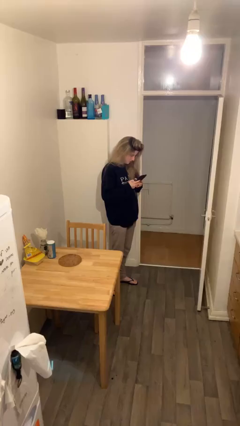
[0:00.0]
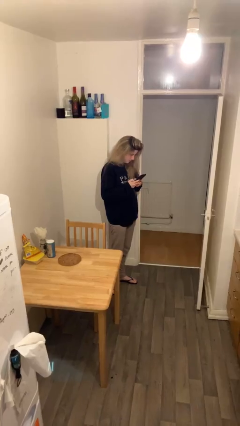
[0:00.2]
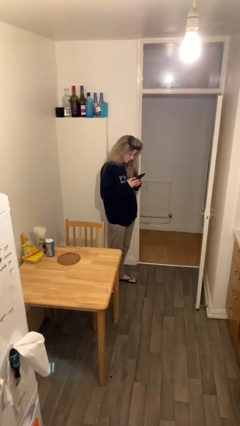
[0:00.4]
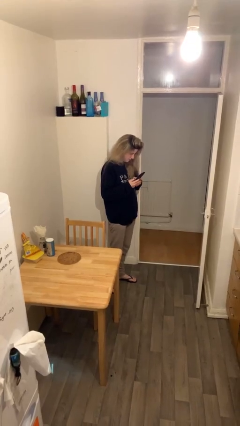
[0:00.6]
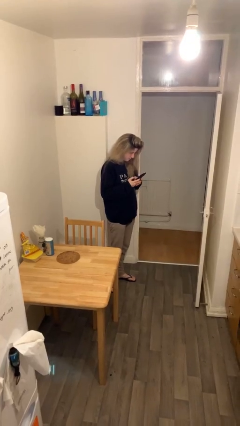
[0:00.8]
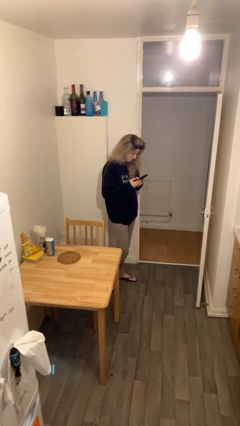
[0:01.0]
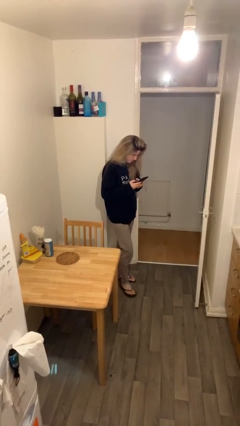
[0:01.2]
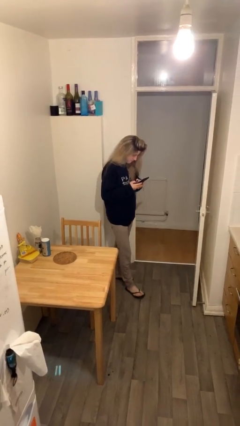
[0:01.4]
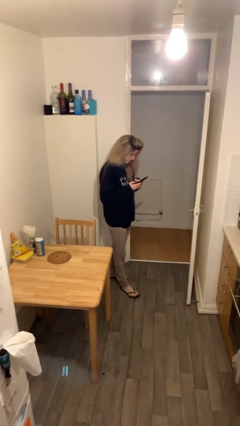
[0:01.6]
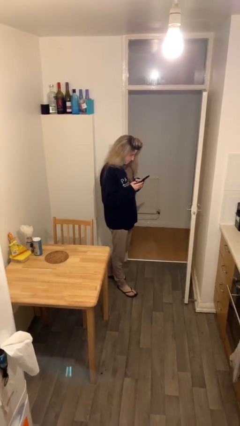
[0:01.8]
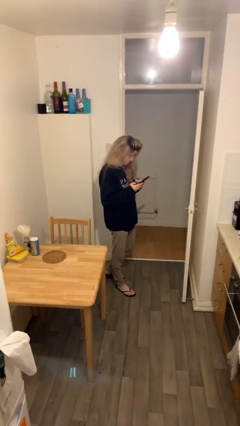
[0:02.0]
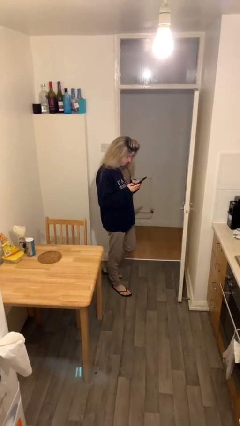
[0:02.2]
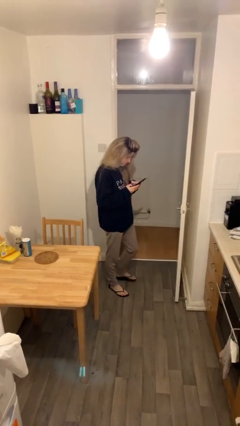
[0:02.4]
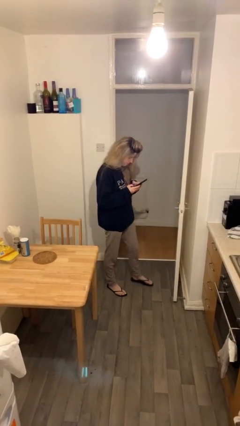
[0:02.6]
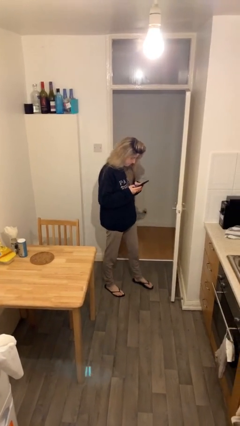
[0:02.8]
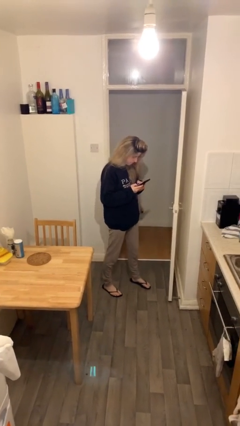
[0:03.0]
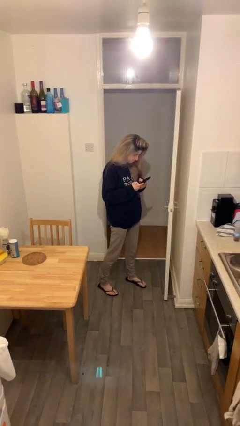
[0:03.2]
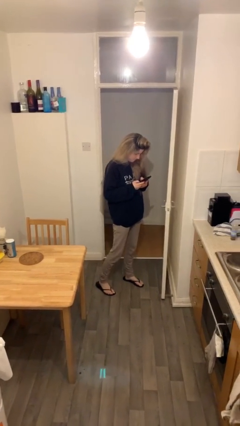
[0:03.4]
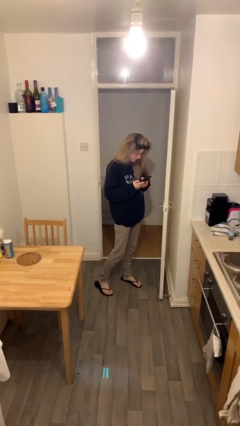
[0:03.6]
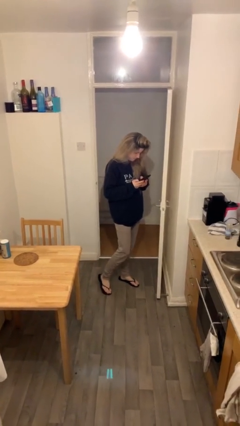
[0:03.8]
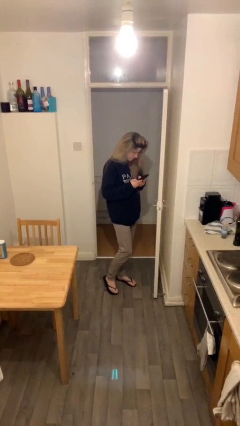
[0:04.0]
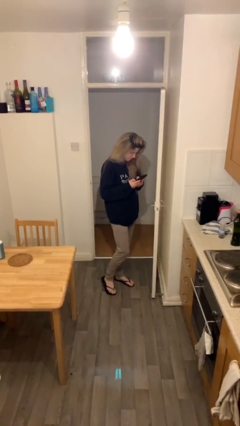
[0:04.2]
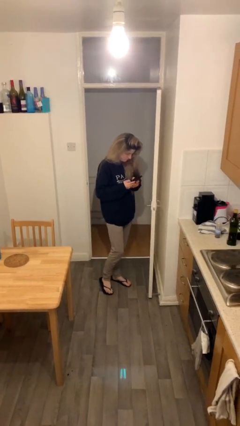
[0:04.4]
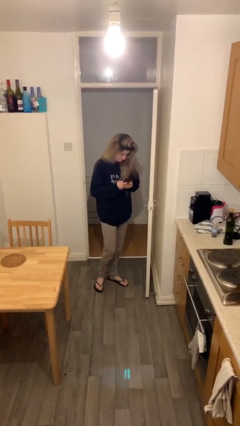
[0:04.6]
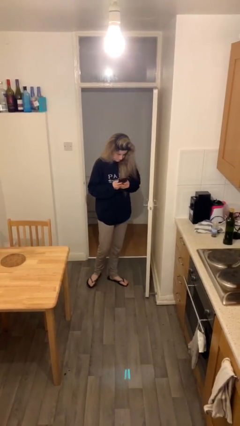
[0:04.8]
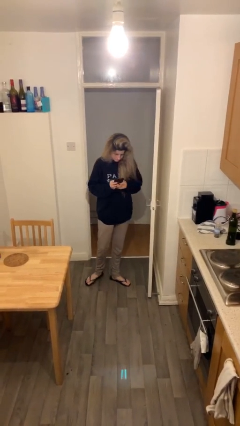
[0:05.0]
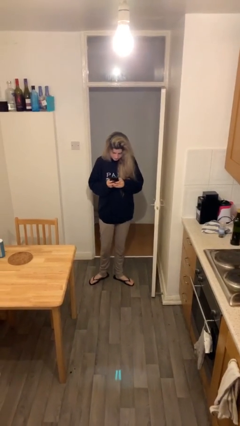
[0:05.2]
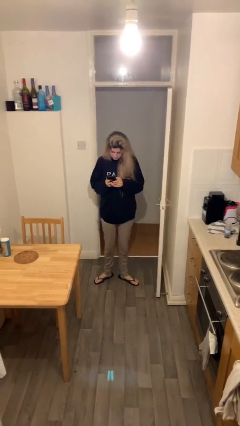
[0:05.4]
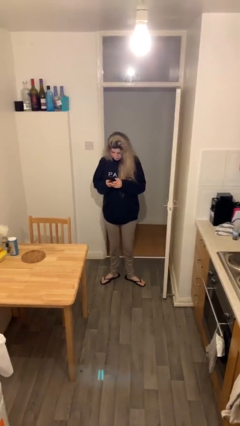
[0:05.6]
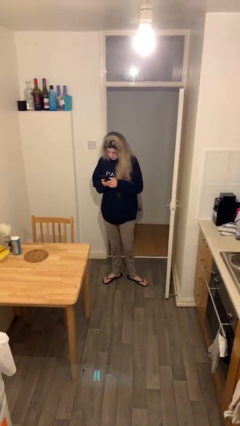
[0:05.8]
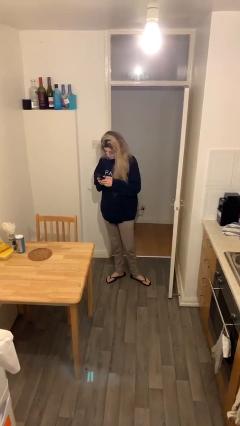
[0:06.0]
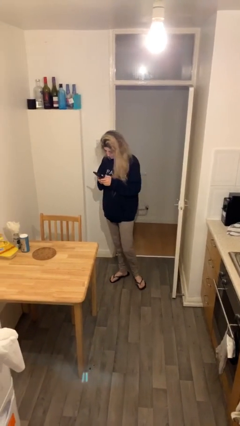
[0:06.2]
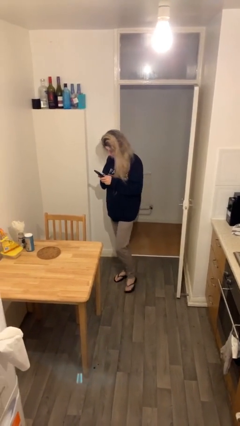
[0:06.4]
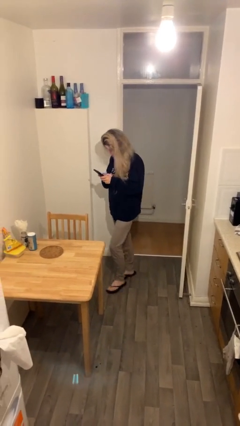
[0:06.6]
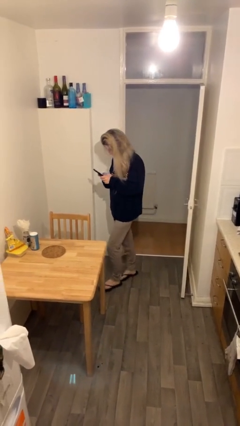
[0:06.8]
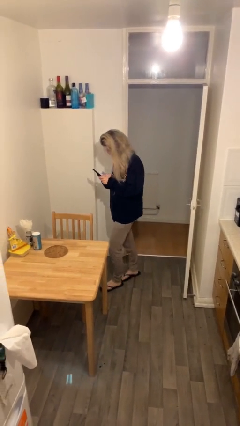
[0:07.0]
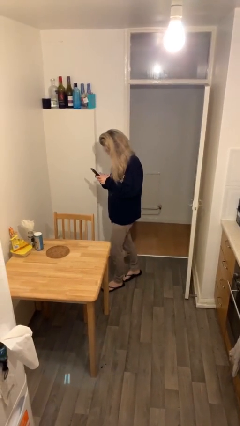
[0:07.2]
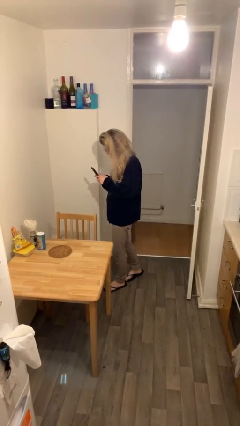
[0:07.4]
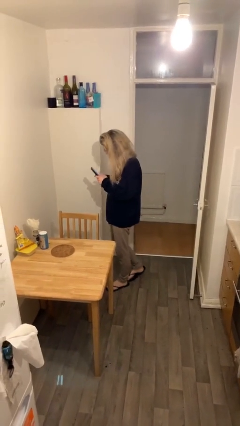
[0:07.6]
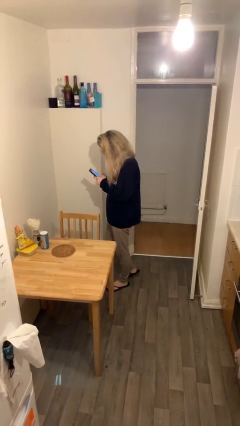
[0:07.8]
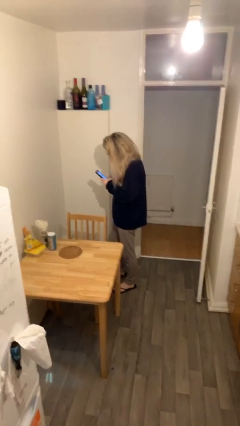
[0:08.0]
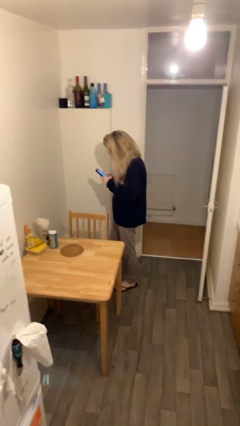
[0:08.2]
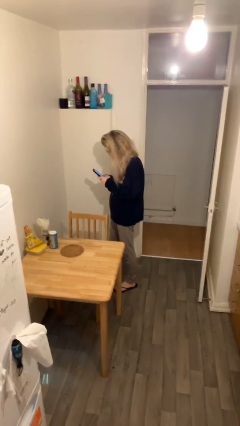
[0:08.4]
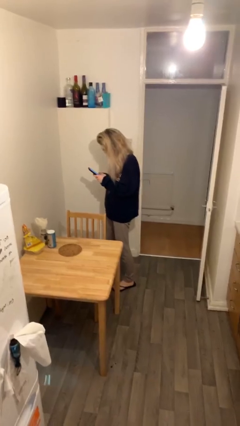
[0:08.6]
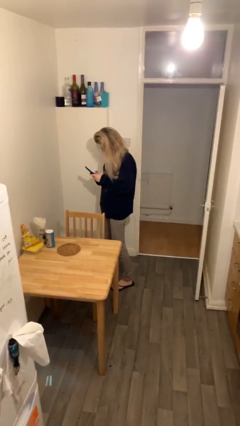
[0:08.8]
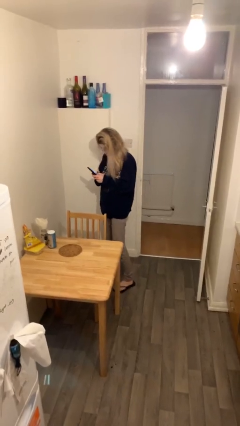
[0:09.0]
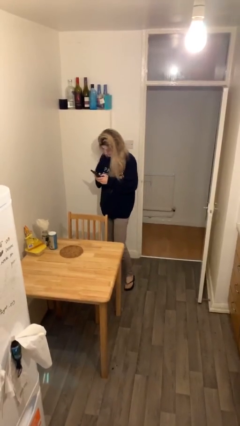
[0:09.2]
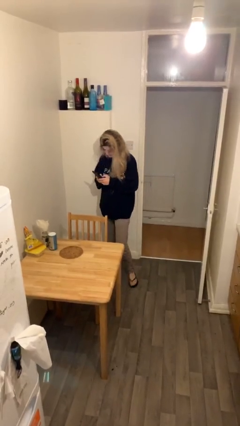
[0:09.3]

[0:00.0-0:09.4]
person texts on phone

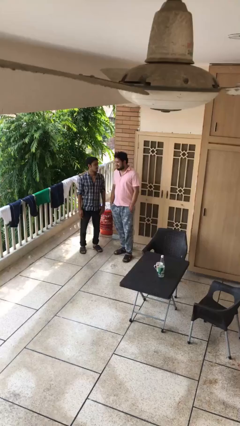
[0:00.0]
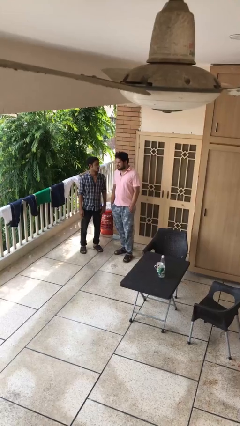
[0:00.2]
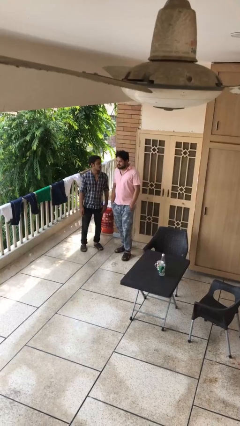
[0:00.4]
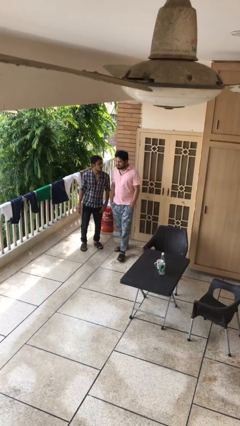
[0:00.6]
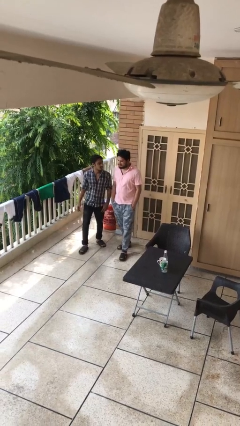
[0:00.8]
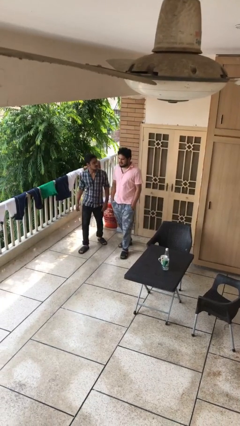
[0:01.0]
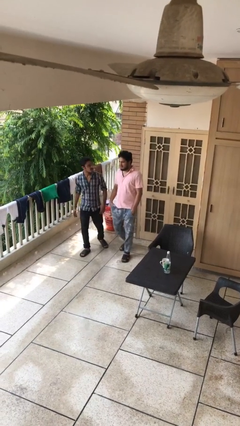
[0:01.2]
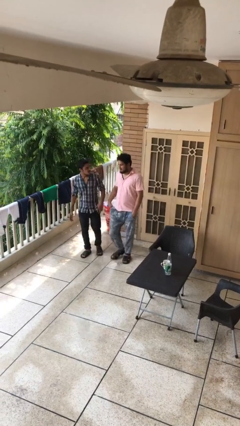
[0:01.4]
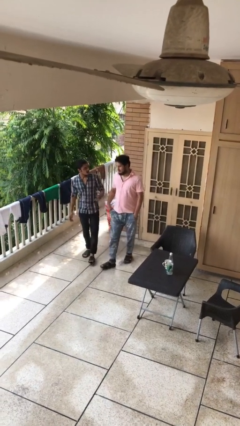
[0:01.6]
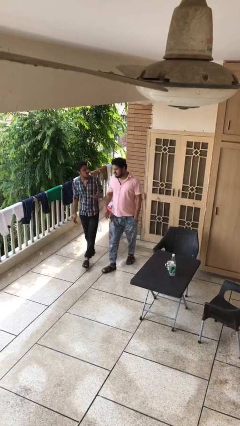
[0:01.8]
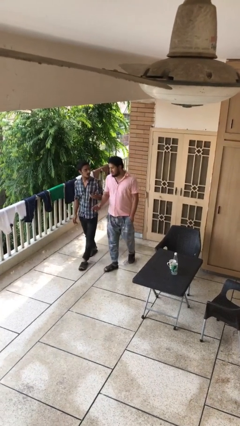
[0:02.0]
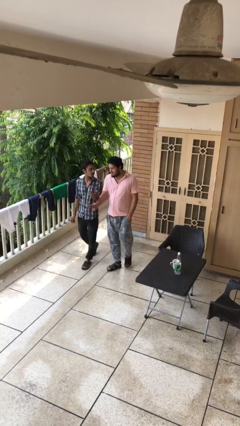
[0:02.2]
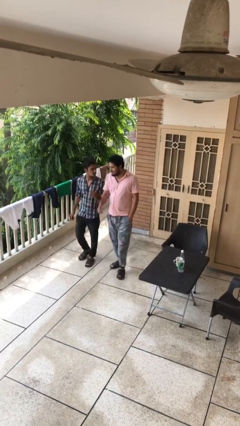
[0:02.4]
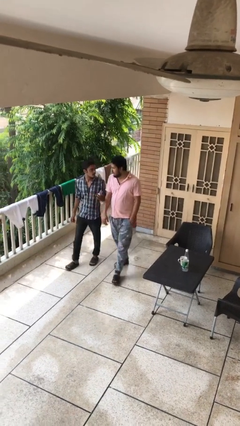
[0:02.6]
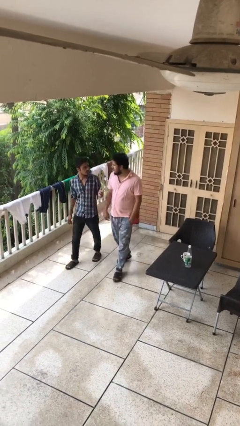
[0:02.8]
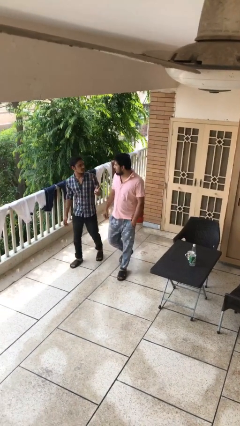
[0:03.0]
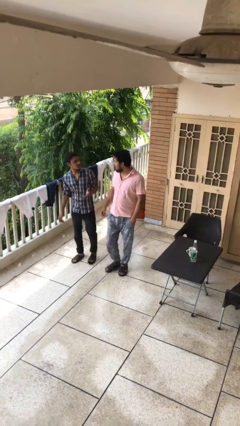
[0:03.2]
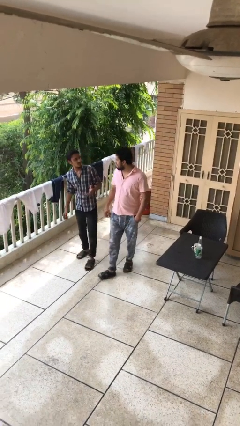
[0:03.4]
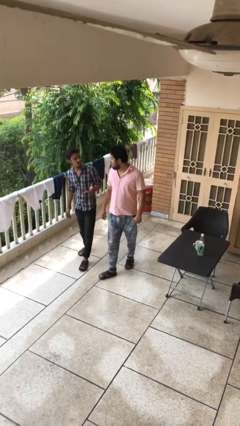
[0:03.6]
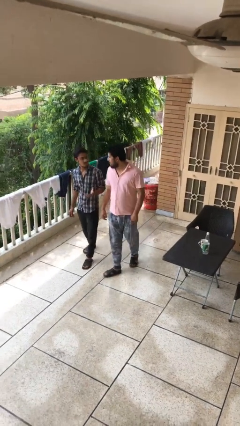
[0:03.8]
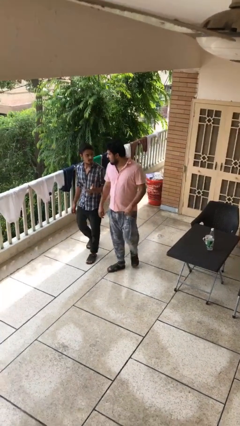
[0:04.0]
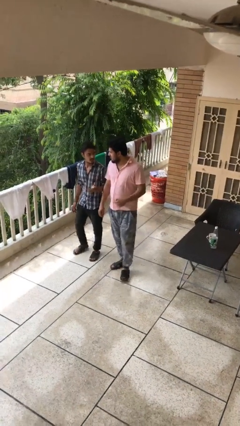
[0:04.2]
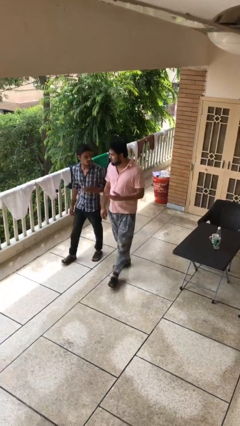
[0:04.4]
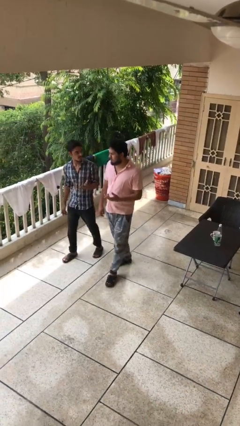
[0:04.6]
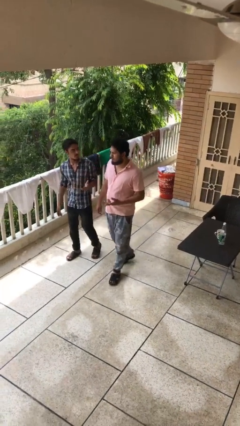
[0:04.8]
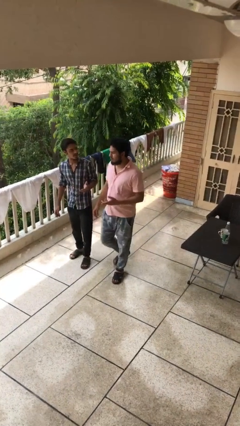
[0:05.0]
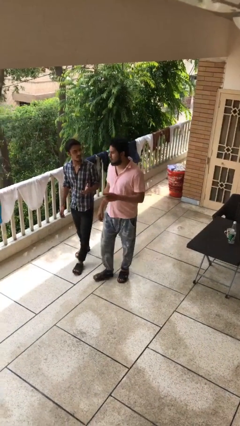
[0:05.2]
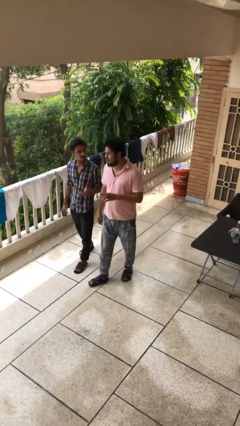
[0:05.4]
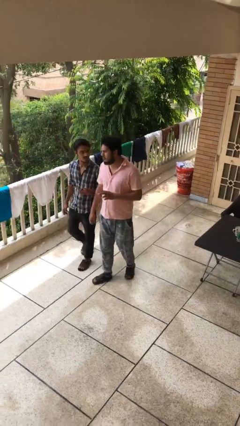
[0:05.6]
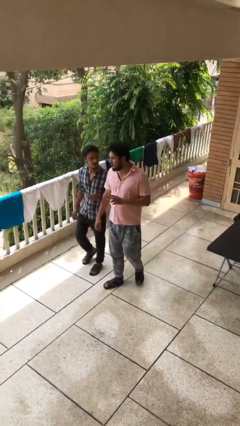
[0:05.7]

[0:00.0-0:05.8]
person talks to person

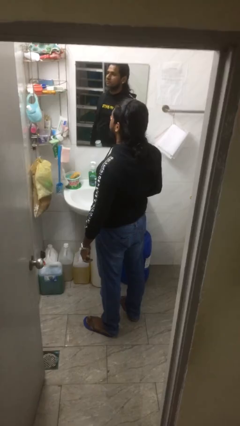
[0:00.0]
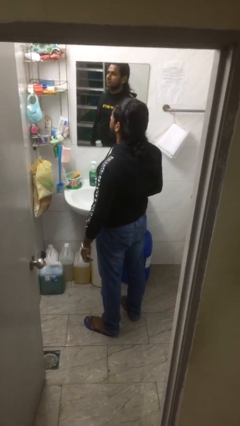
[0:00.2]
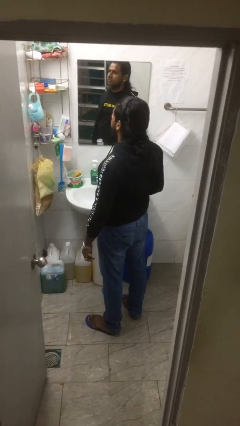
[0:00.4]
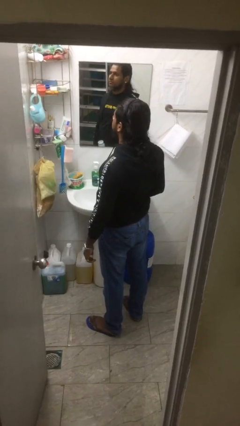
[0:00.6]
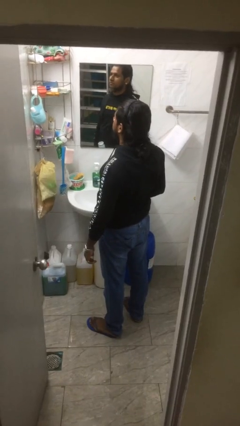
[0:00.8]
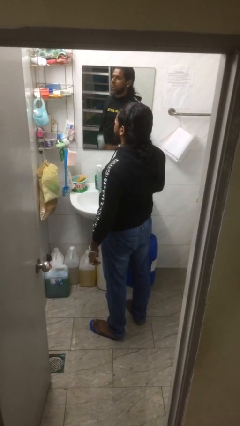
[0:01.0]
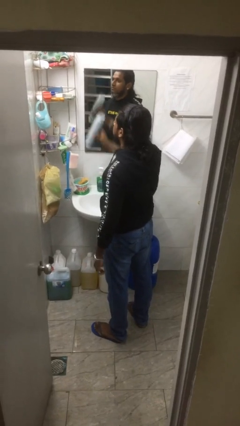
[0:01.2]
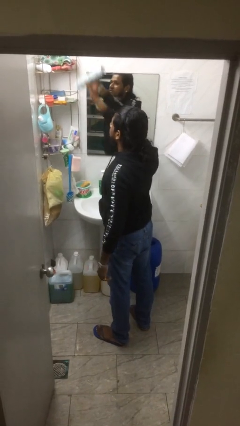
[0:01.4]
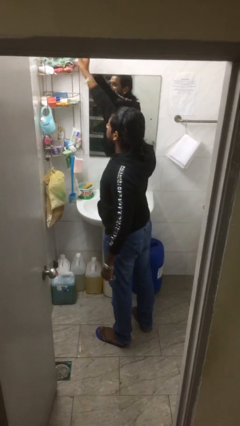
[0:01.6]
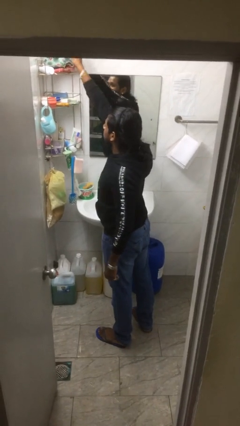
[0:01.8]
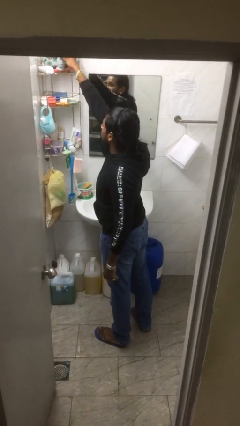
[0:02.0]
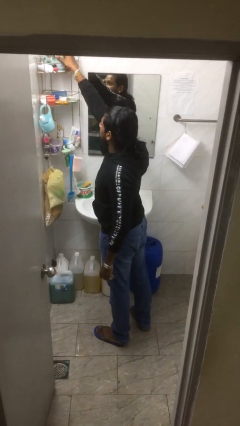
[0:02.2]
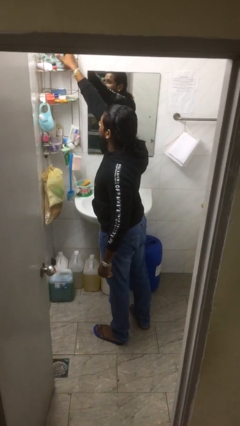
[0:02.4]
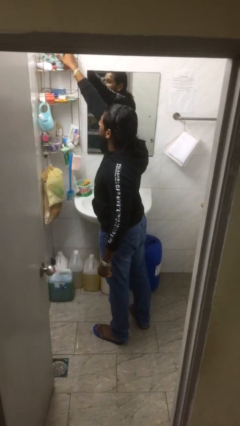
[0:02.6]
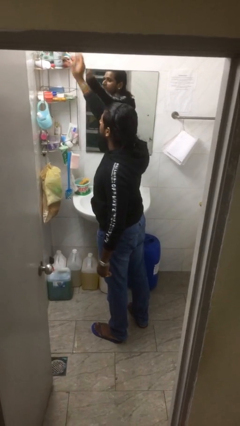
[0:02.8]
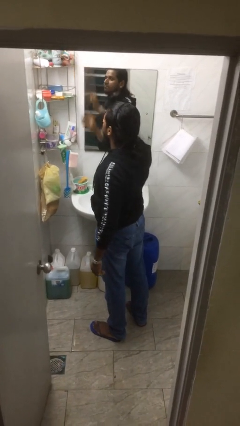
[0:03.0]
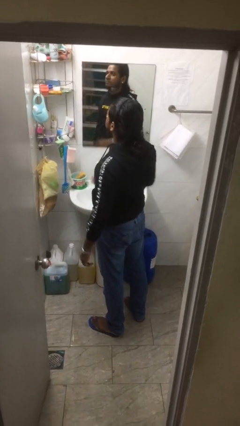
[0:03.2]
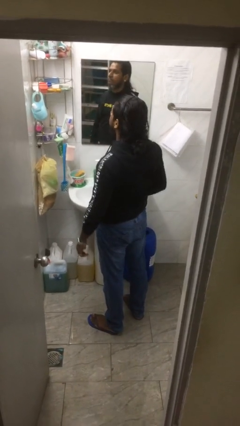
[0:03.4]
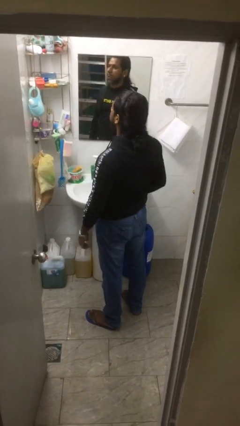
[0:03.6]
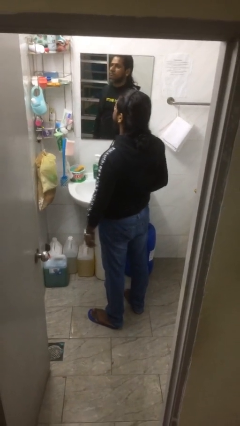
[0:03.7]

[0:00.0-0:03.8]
person puts down object on countertop
